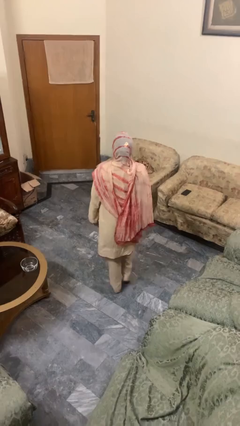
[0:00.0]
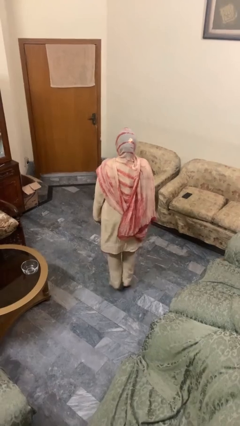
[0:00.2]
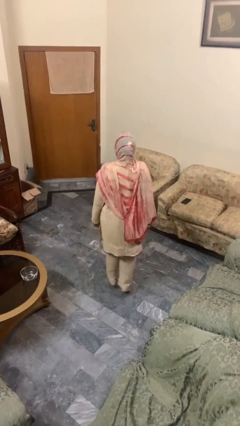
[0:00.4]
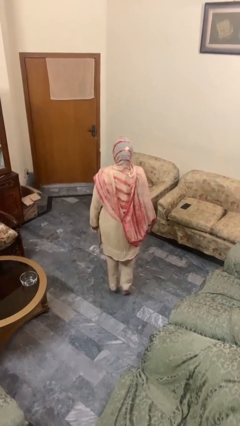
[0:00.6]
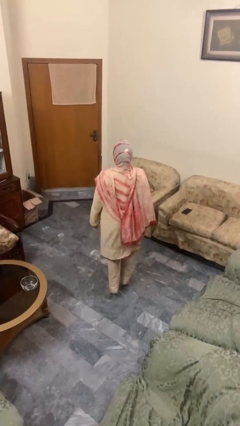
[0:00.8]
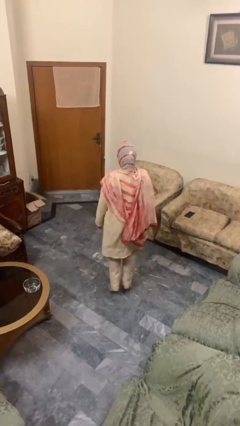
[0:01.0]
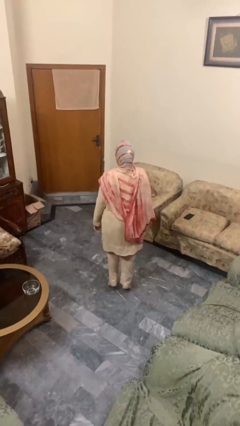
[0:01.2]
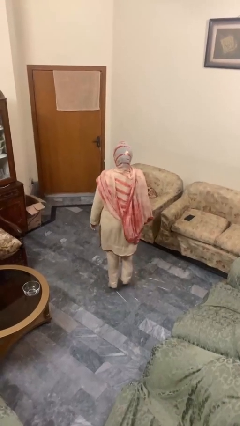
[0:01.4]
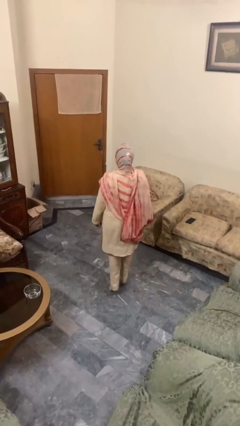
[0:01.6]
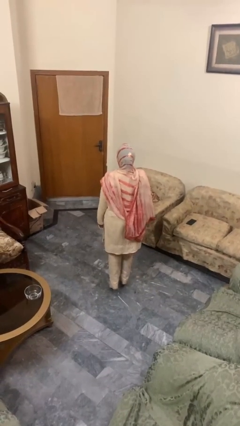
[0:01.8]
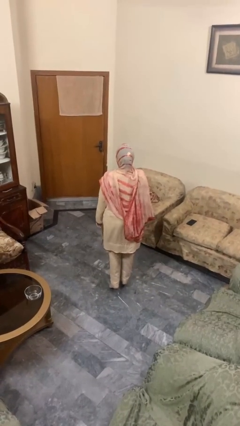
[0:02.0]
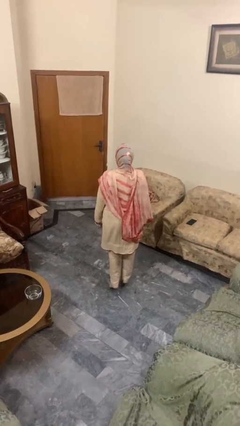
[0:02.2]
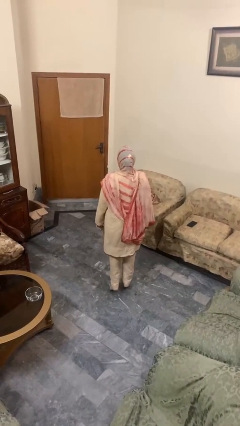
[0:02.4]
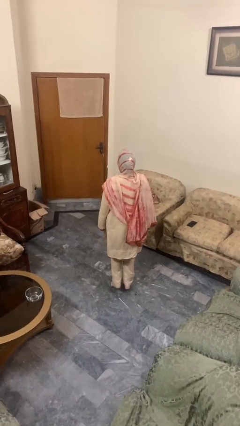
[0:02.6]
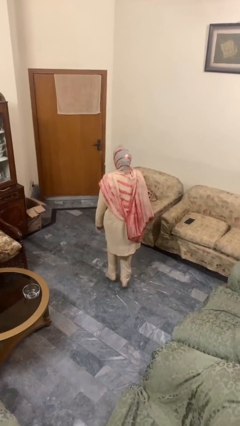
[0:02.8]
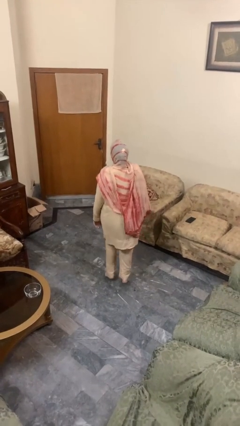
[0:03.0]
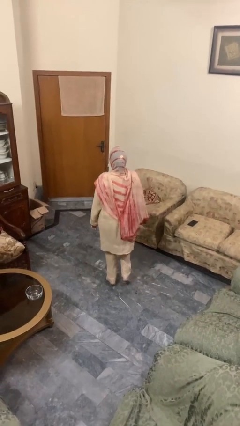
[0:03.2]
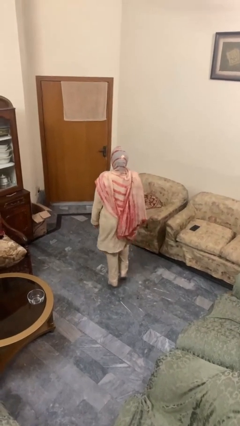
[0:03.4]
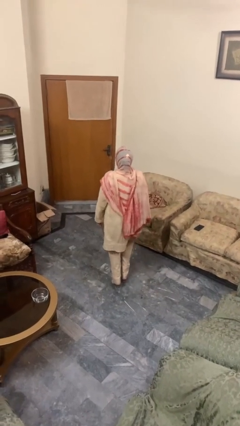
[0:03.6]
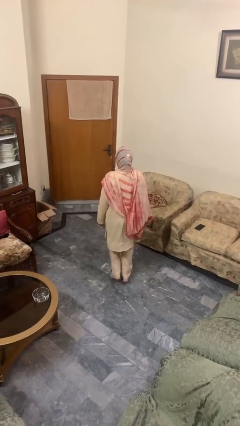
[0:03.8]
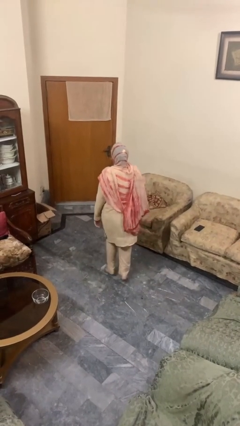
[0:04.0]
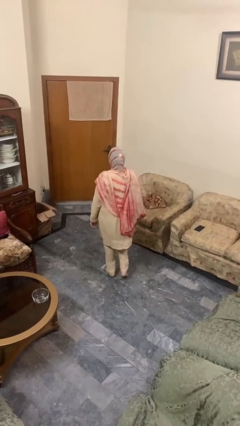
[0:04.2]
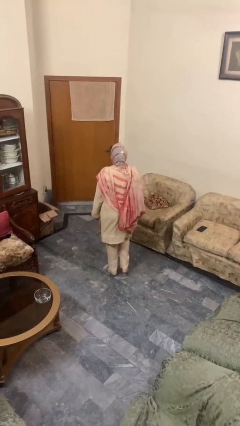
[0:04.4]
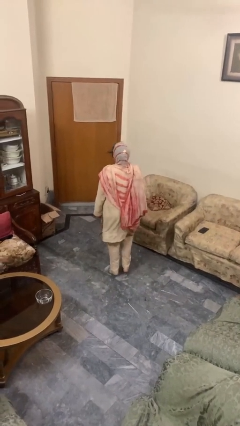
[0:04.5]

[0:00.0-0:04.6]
person walks tiptoe

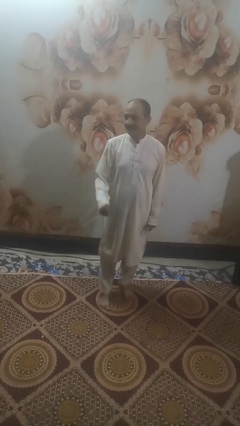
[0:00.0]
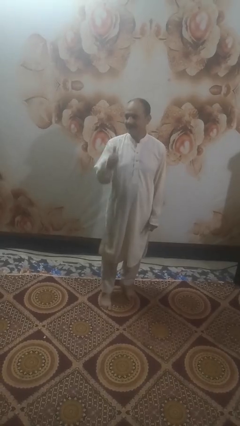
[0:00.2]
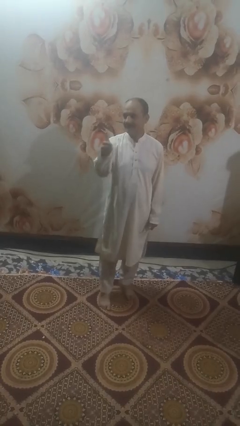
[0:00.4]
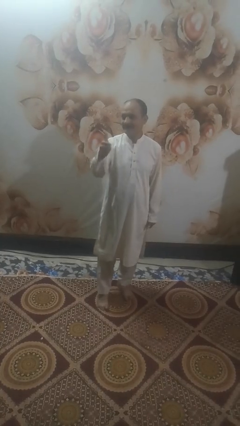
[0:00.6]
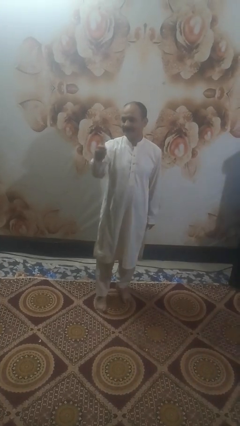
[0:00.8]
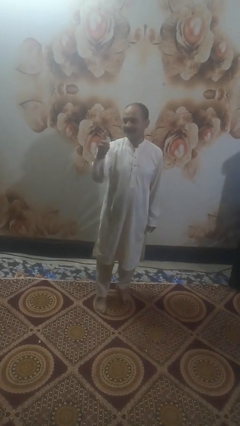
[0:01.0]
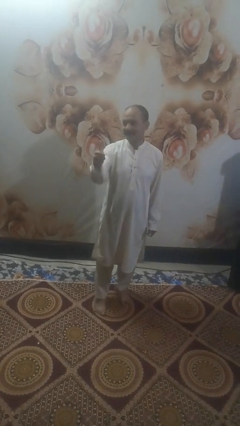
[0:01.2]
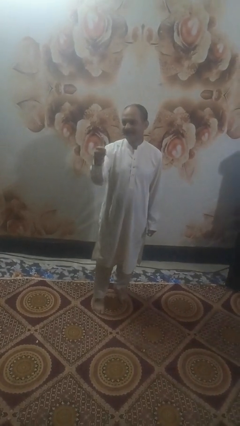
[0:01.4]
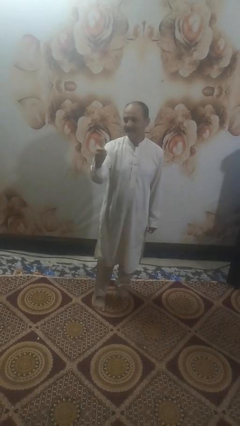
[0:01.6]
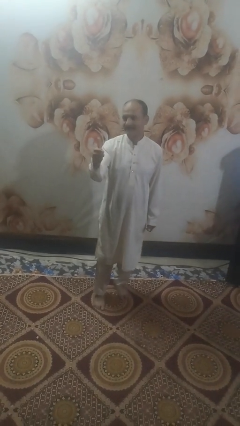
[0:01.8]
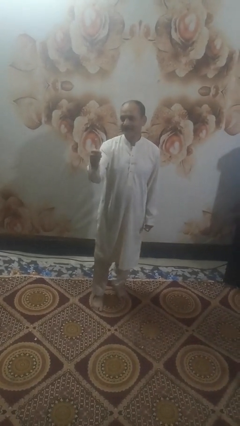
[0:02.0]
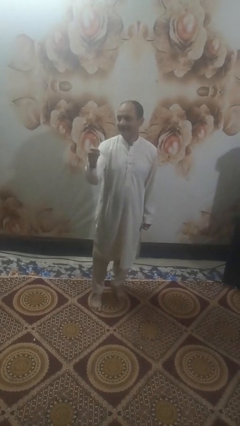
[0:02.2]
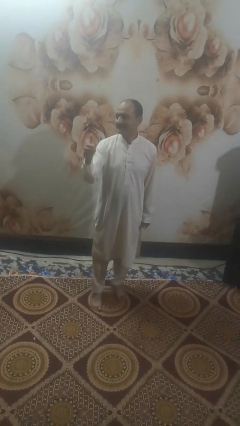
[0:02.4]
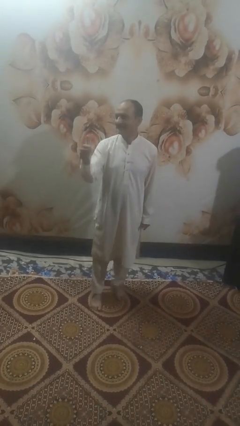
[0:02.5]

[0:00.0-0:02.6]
person gestures thumbs up

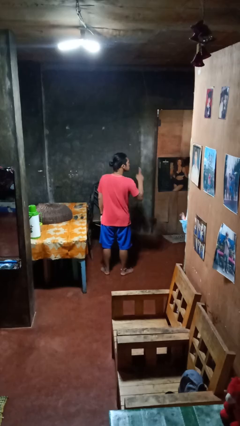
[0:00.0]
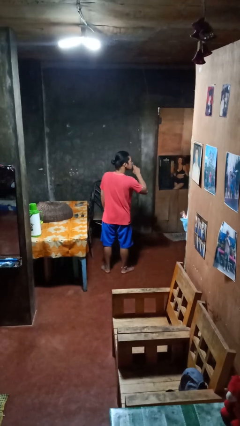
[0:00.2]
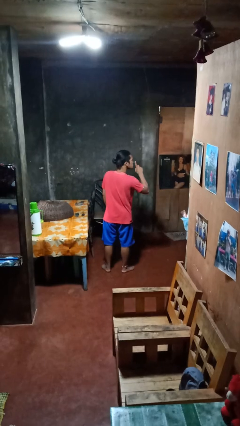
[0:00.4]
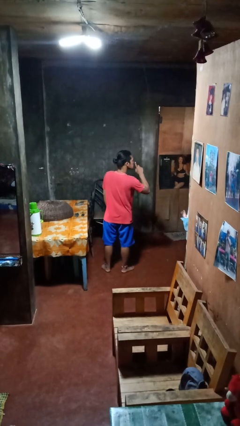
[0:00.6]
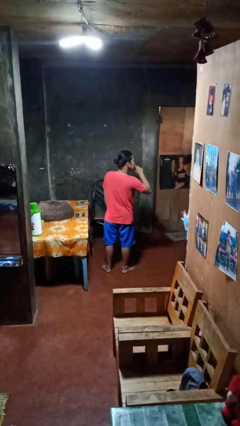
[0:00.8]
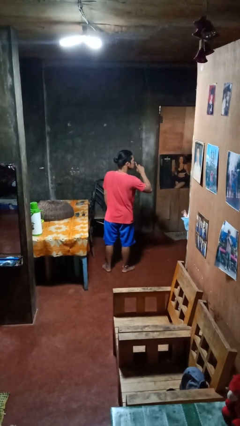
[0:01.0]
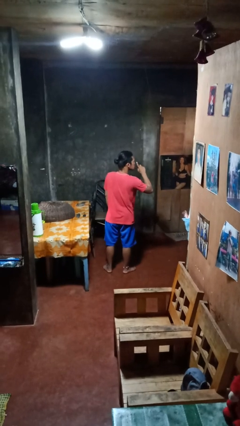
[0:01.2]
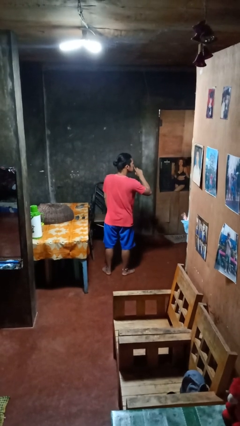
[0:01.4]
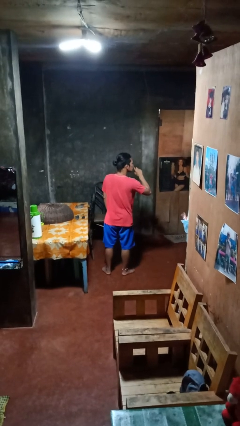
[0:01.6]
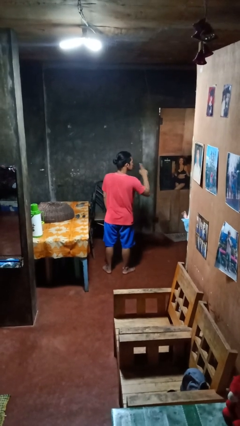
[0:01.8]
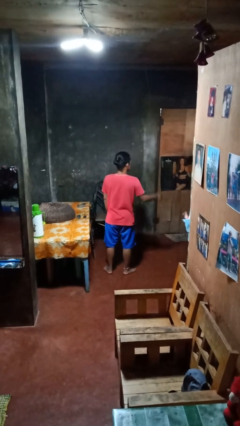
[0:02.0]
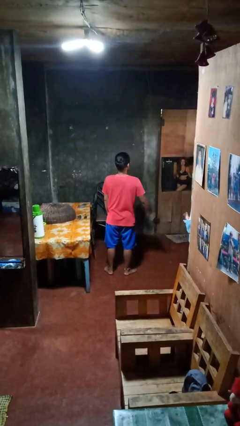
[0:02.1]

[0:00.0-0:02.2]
person gestures be quiet

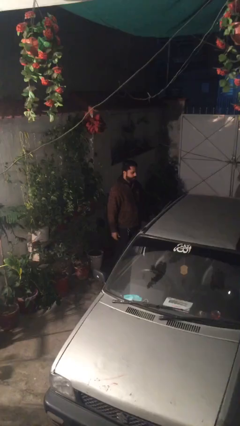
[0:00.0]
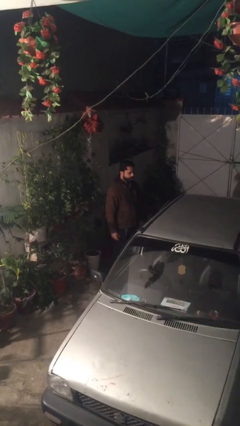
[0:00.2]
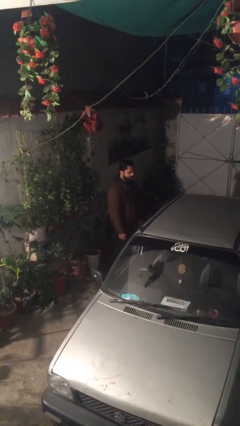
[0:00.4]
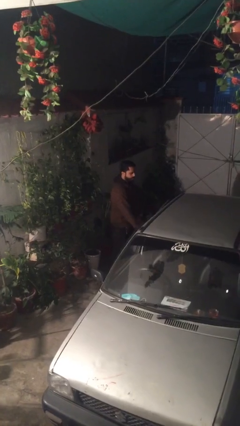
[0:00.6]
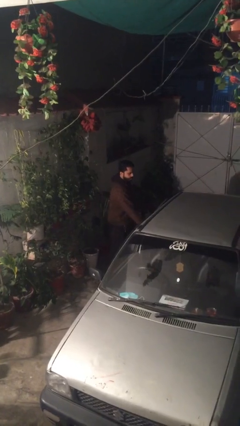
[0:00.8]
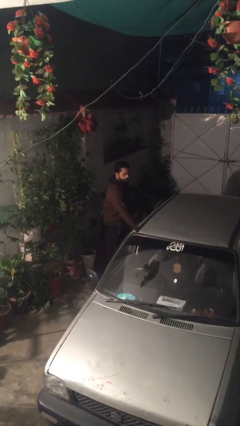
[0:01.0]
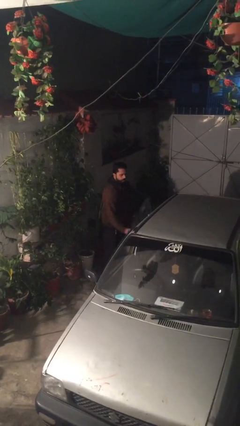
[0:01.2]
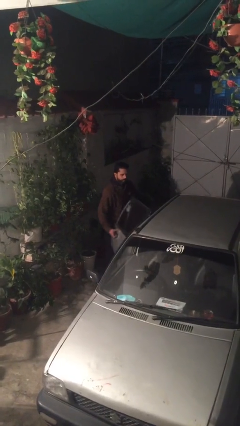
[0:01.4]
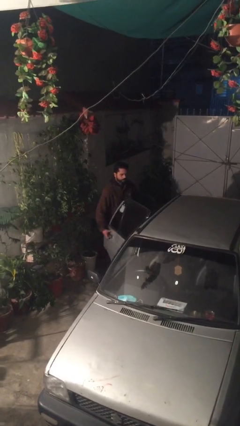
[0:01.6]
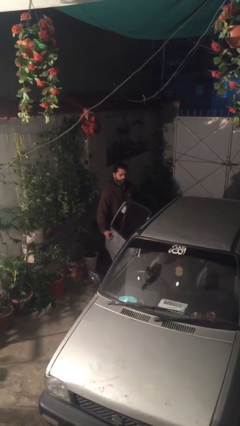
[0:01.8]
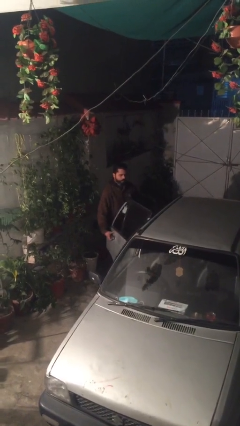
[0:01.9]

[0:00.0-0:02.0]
person opens car door

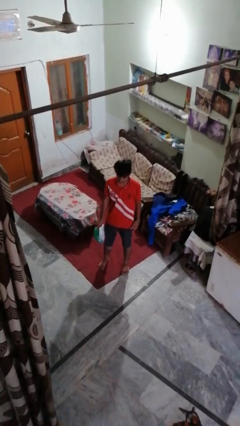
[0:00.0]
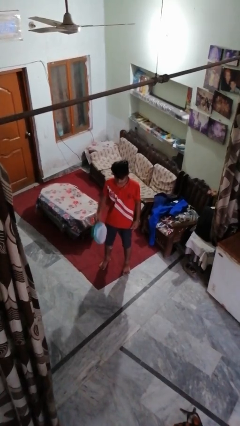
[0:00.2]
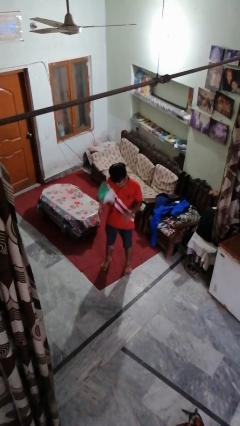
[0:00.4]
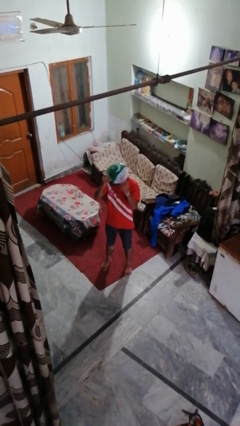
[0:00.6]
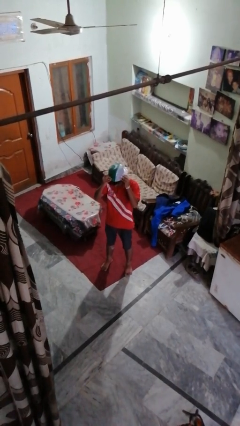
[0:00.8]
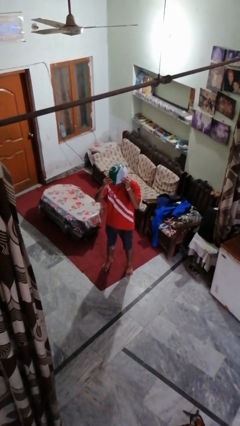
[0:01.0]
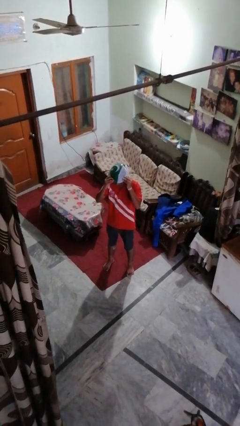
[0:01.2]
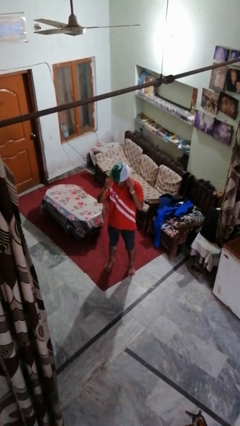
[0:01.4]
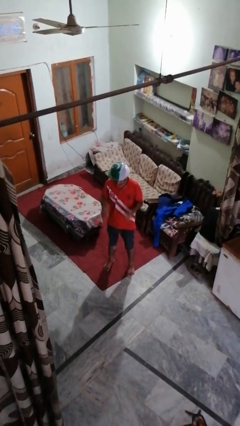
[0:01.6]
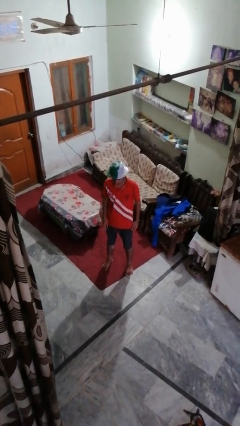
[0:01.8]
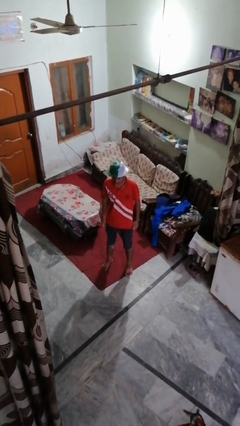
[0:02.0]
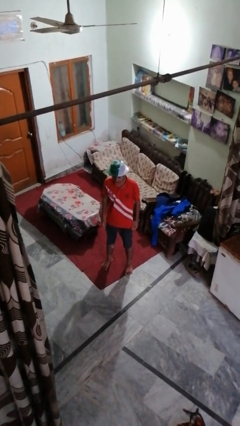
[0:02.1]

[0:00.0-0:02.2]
person puts on hat

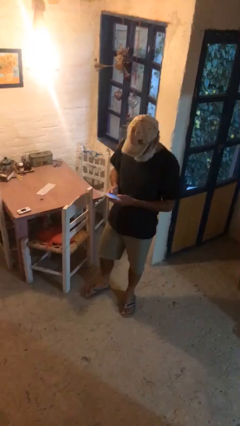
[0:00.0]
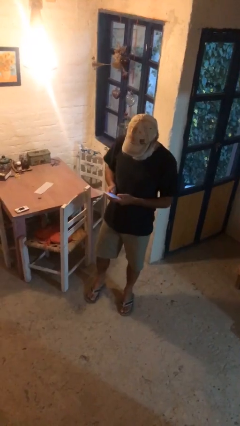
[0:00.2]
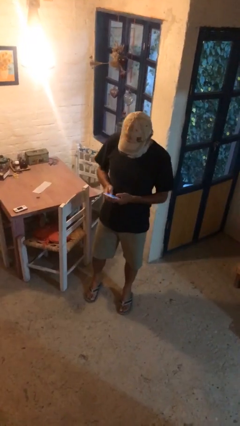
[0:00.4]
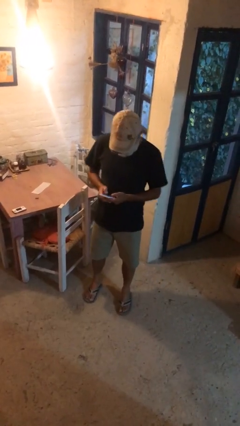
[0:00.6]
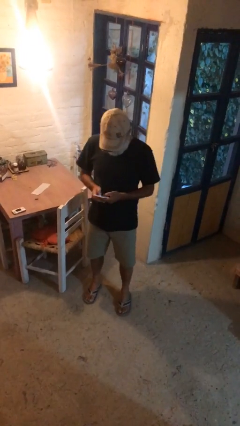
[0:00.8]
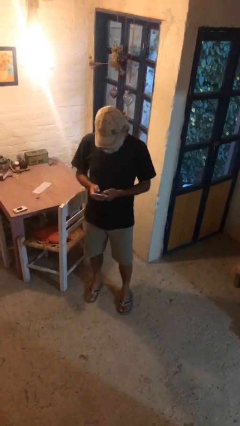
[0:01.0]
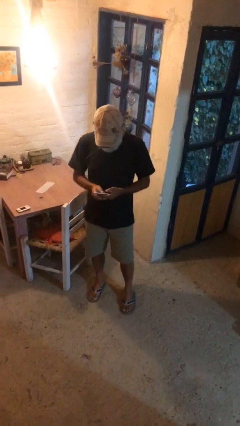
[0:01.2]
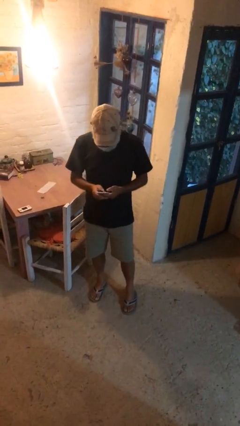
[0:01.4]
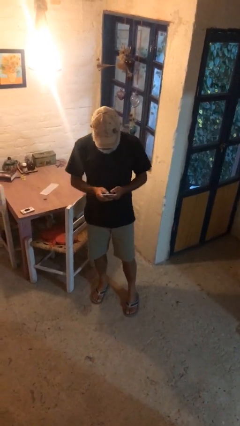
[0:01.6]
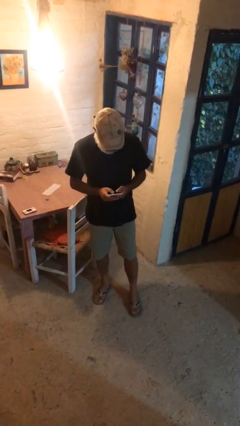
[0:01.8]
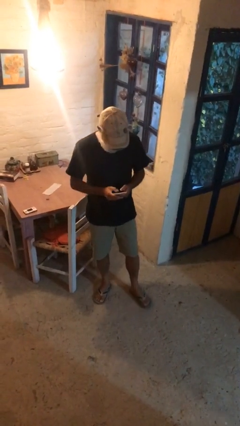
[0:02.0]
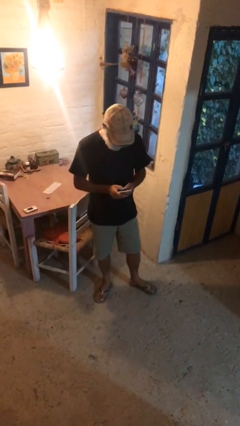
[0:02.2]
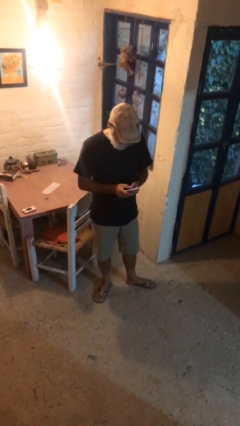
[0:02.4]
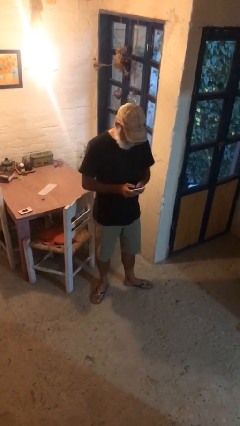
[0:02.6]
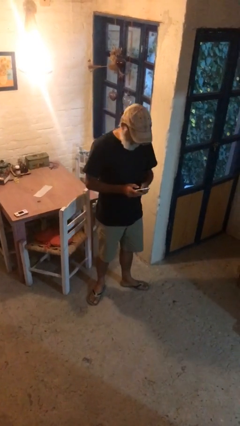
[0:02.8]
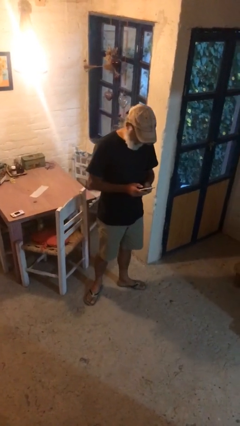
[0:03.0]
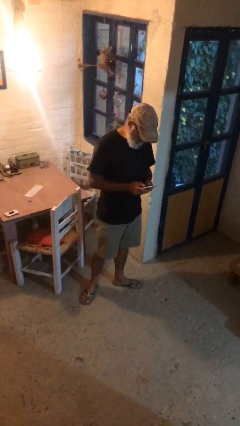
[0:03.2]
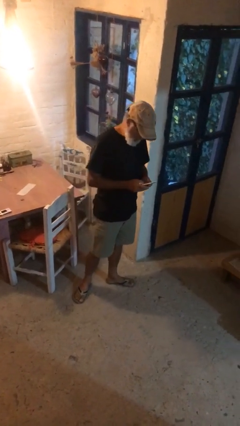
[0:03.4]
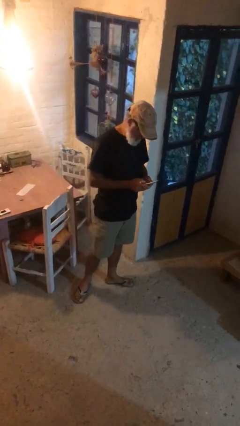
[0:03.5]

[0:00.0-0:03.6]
person texts on phone

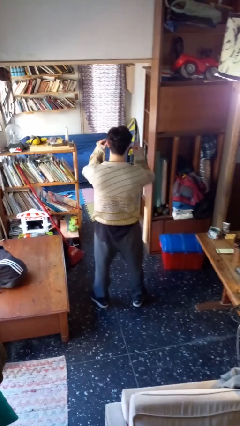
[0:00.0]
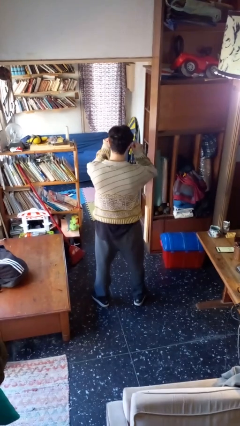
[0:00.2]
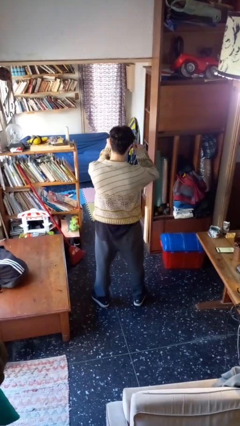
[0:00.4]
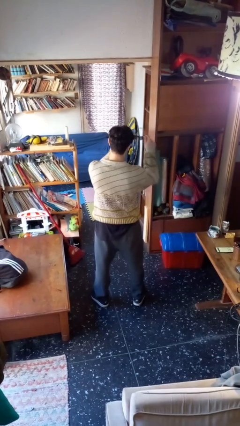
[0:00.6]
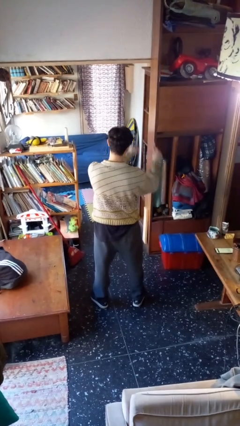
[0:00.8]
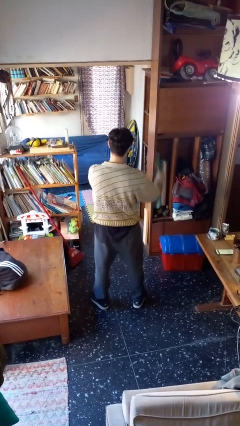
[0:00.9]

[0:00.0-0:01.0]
person takes off sunglasses
